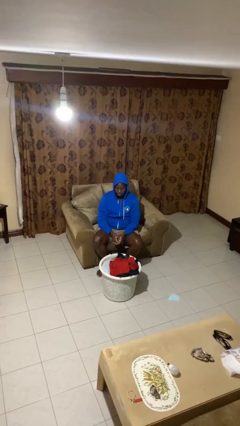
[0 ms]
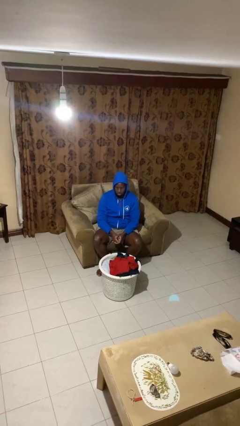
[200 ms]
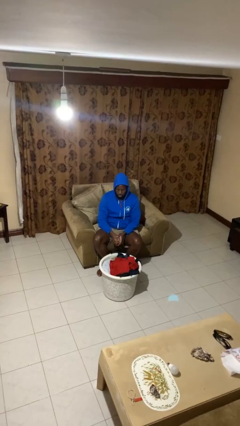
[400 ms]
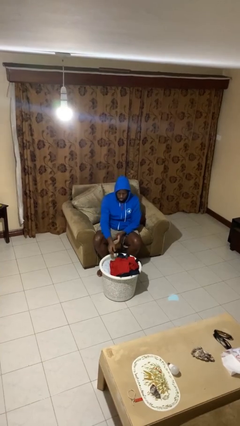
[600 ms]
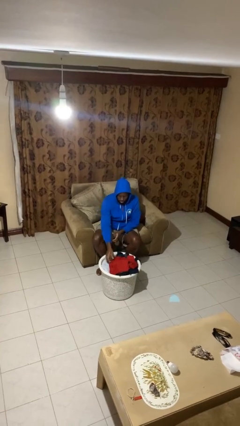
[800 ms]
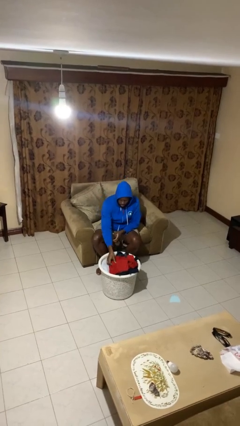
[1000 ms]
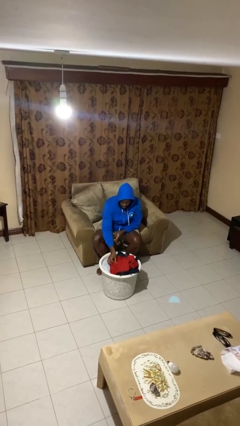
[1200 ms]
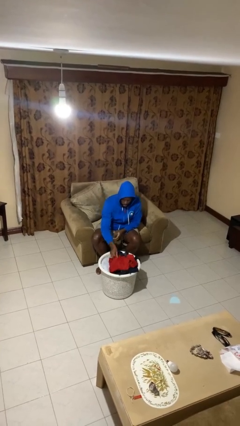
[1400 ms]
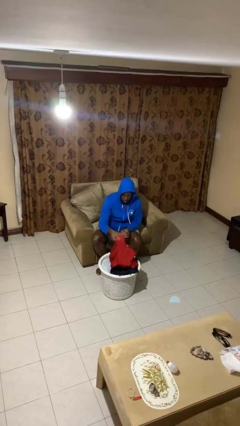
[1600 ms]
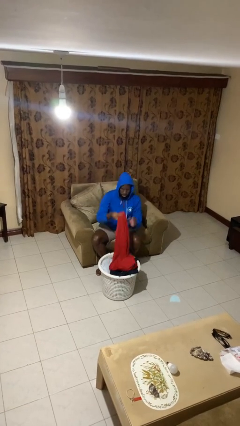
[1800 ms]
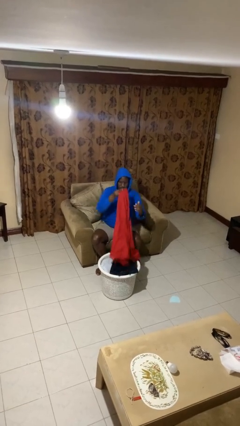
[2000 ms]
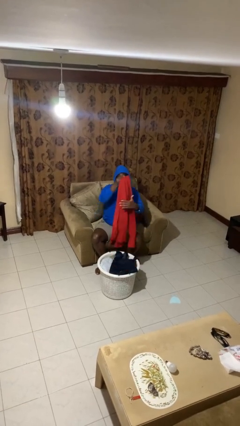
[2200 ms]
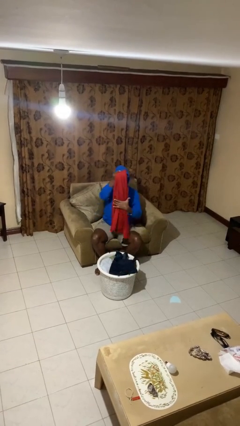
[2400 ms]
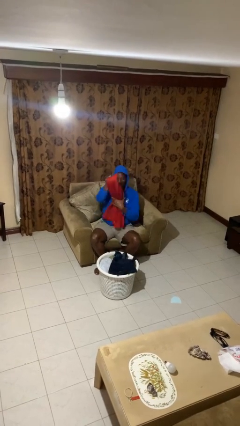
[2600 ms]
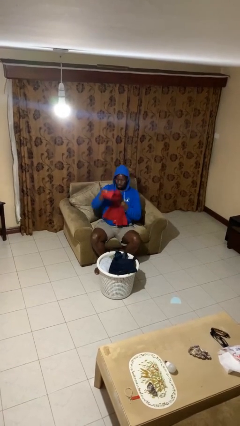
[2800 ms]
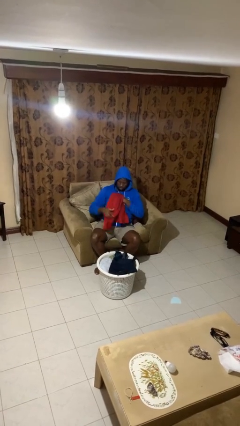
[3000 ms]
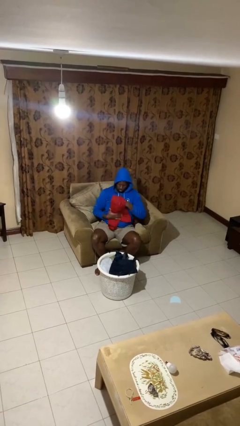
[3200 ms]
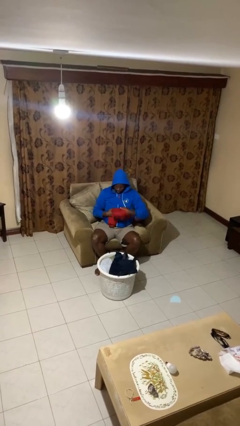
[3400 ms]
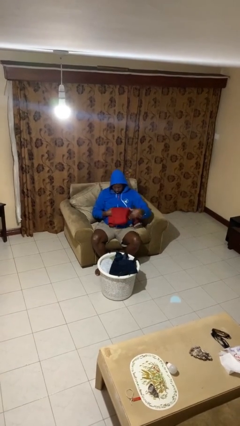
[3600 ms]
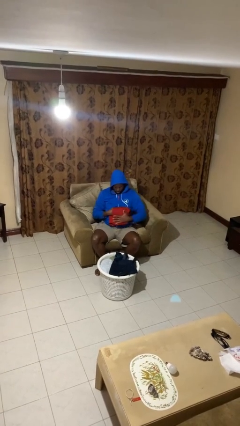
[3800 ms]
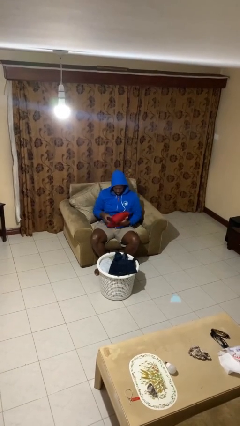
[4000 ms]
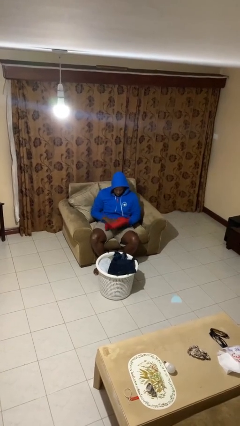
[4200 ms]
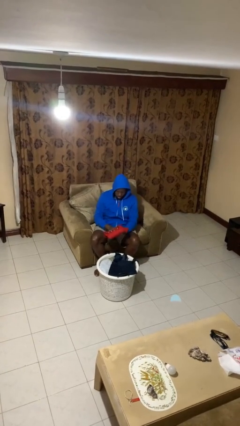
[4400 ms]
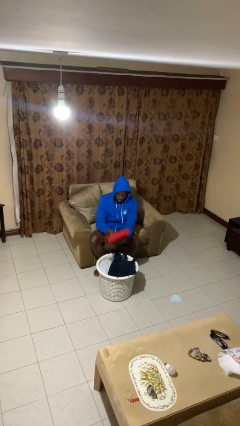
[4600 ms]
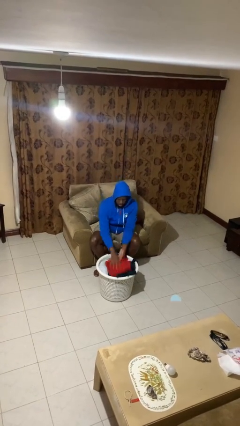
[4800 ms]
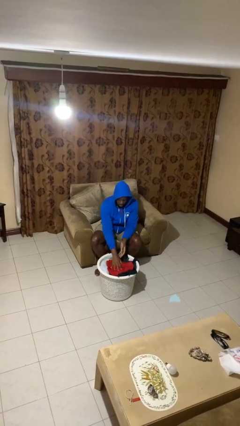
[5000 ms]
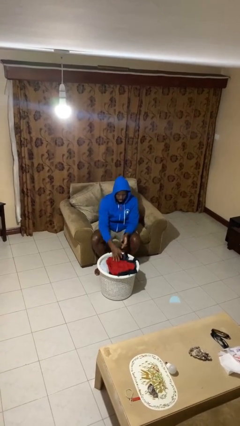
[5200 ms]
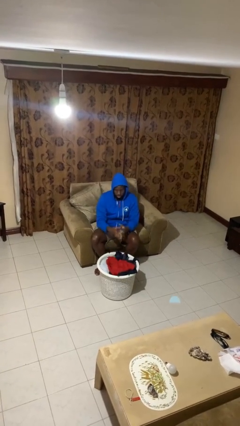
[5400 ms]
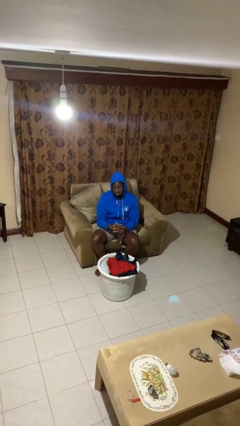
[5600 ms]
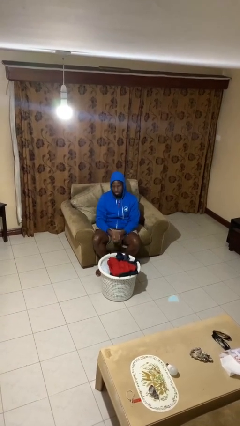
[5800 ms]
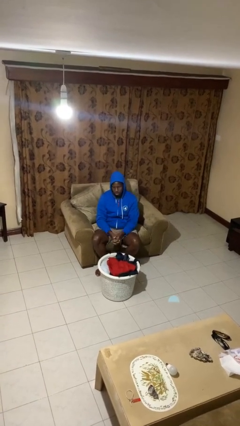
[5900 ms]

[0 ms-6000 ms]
person folds shirt

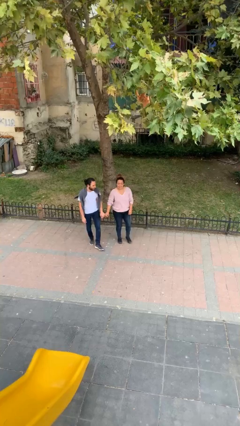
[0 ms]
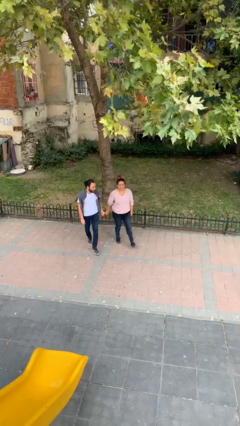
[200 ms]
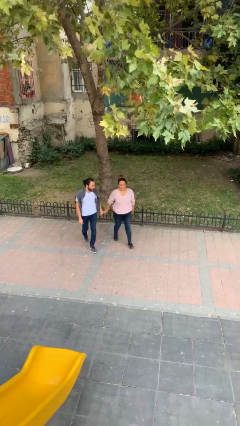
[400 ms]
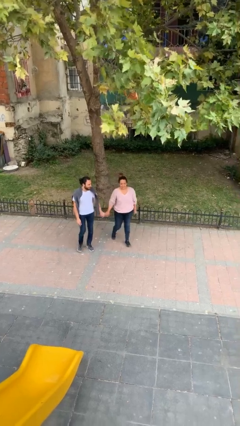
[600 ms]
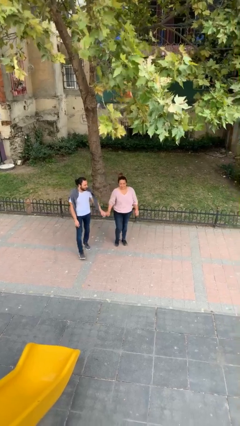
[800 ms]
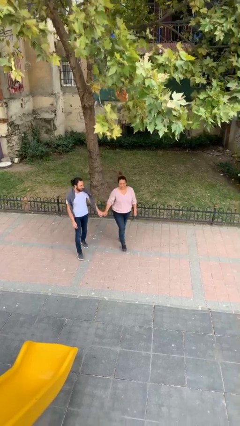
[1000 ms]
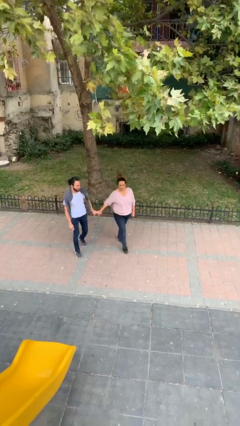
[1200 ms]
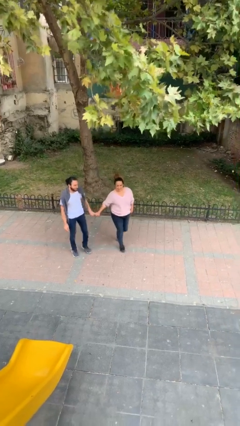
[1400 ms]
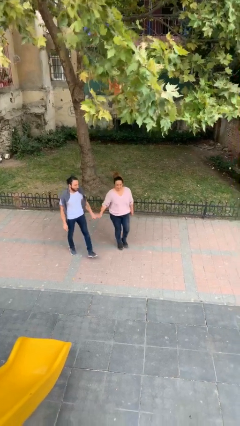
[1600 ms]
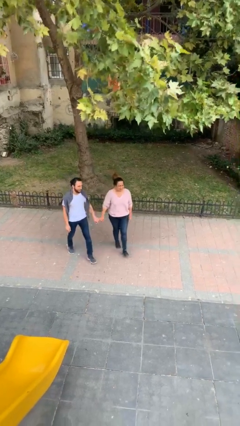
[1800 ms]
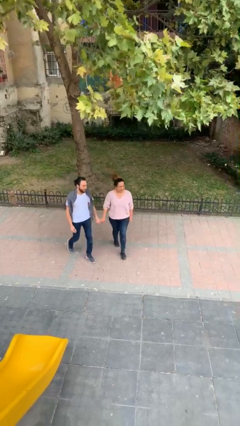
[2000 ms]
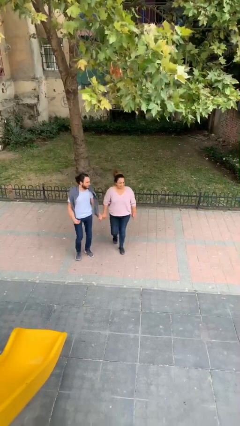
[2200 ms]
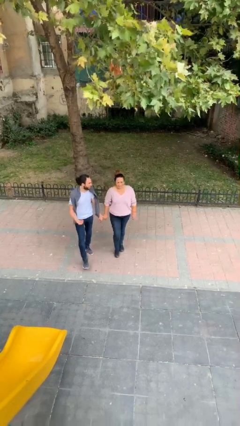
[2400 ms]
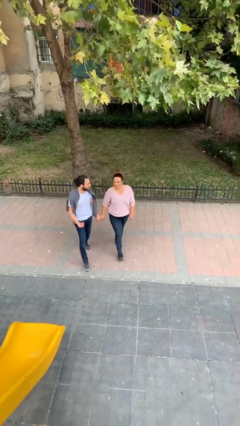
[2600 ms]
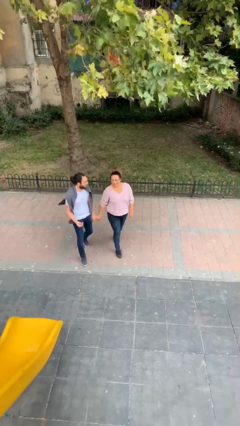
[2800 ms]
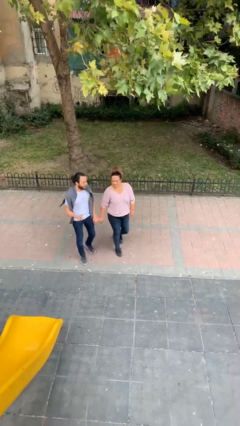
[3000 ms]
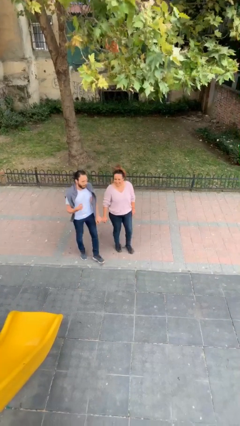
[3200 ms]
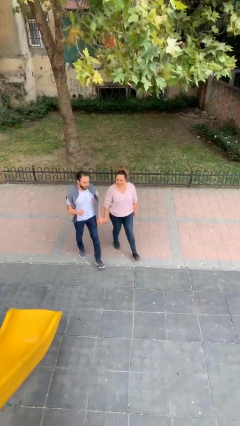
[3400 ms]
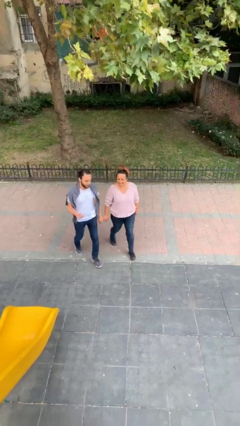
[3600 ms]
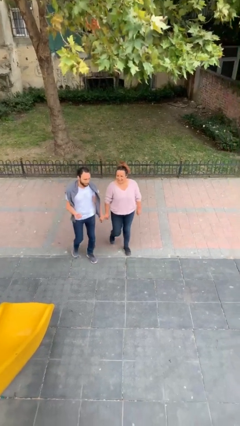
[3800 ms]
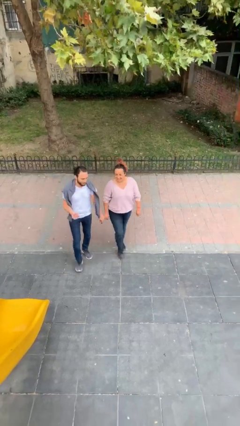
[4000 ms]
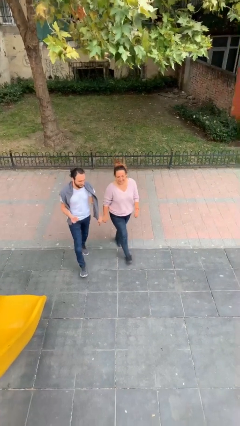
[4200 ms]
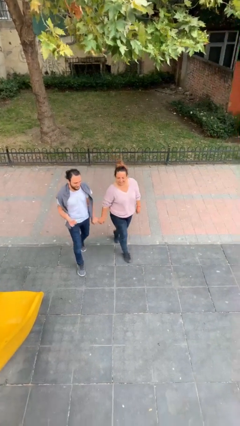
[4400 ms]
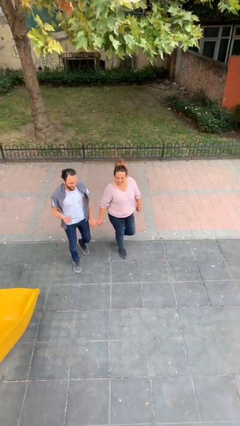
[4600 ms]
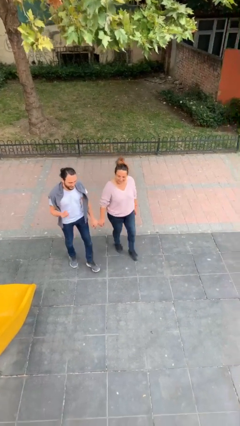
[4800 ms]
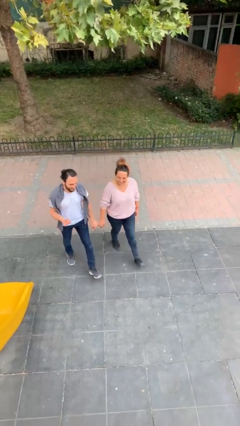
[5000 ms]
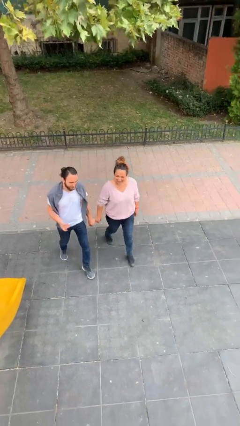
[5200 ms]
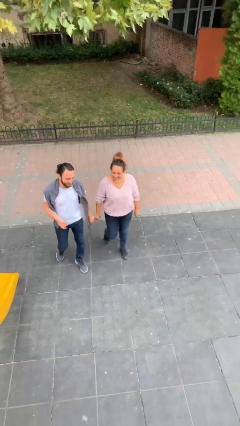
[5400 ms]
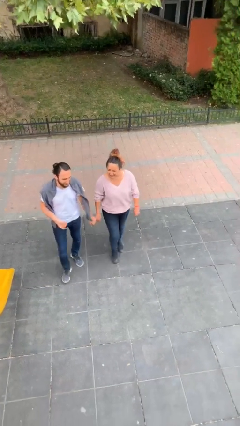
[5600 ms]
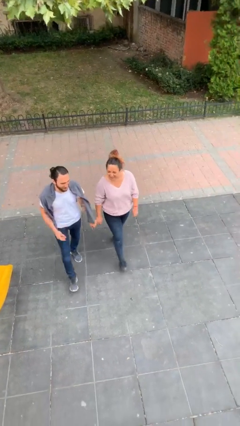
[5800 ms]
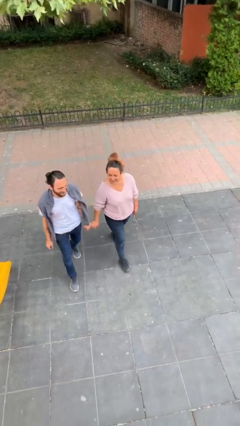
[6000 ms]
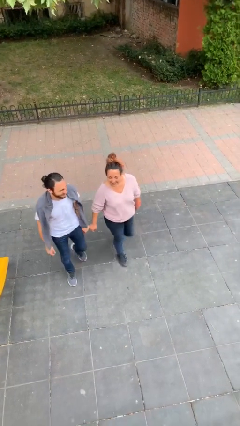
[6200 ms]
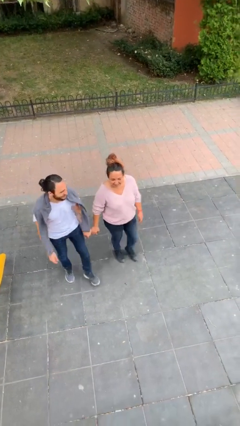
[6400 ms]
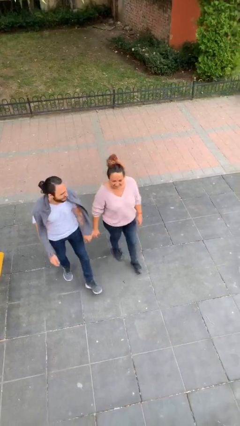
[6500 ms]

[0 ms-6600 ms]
person holds hand

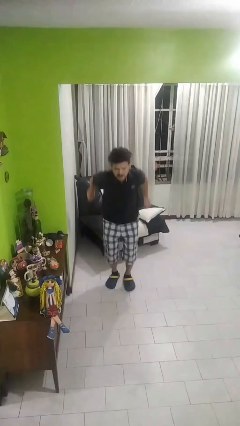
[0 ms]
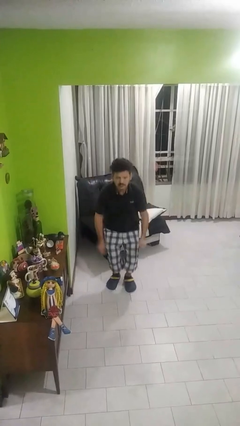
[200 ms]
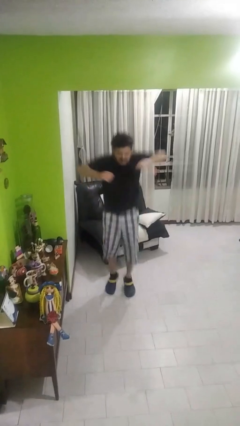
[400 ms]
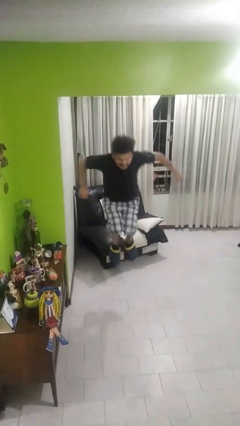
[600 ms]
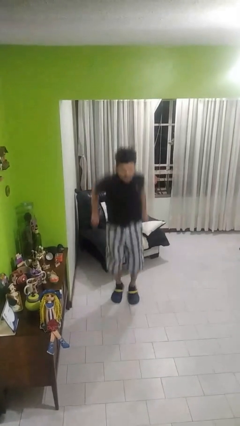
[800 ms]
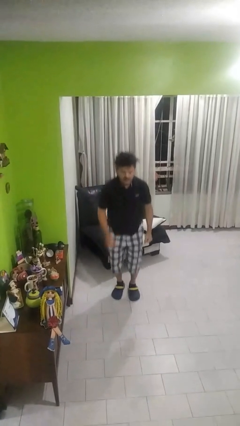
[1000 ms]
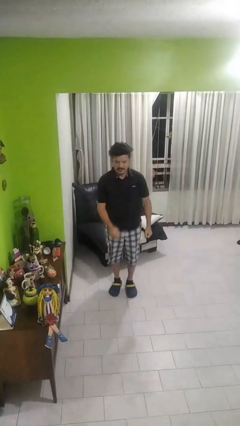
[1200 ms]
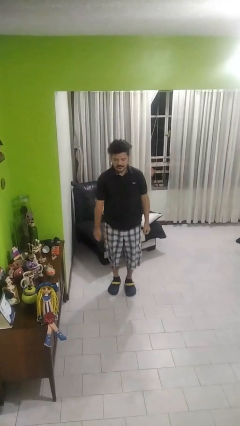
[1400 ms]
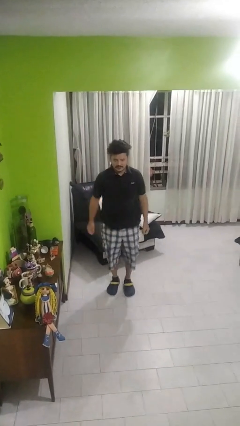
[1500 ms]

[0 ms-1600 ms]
person jumps

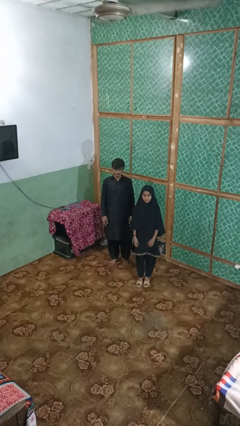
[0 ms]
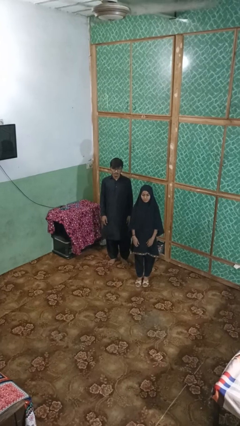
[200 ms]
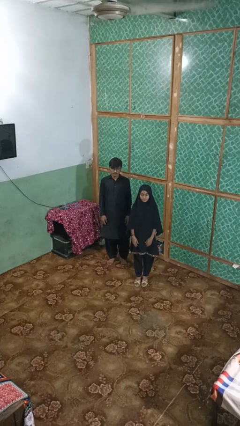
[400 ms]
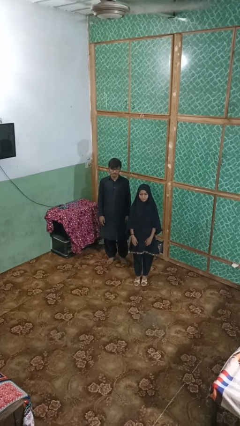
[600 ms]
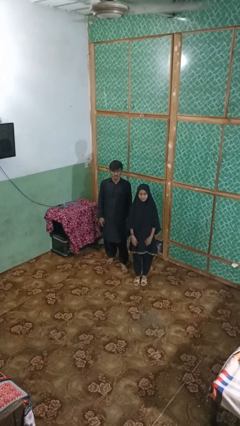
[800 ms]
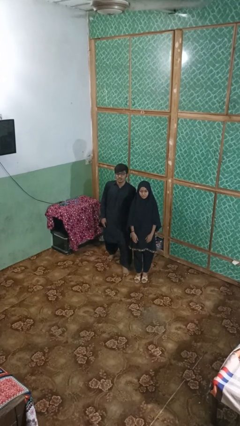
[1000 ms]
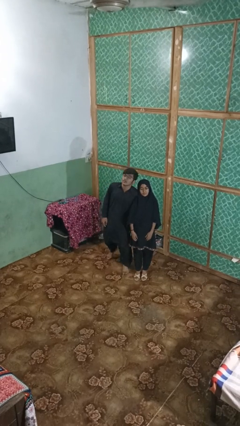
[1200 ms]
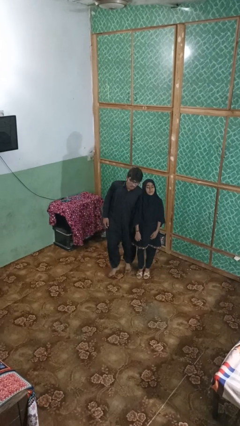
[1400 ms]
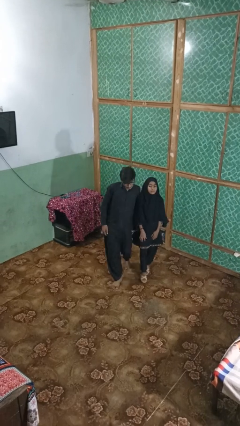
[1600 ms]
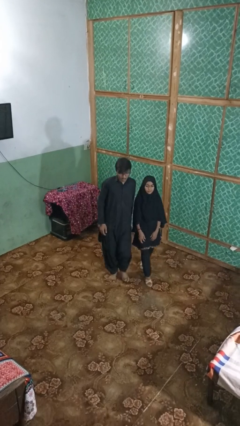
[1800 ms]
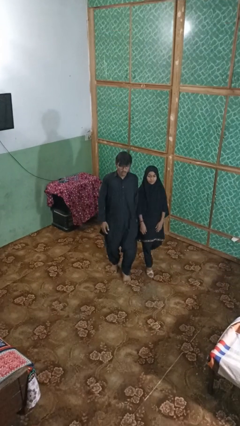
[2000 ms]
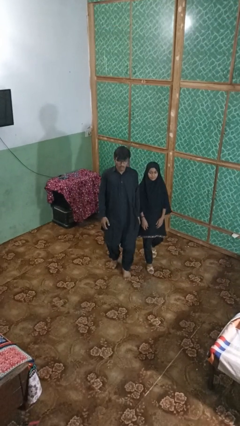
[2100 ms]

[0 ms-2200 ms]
person shoves person

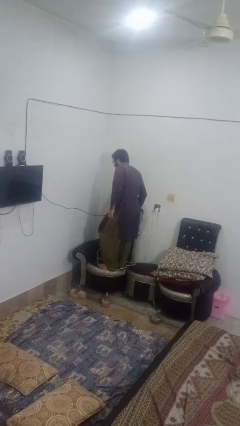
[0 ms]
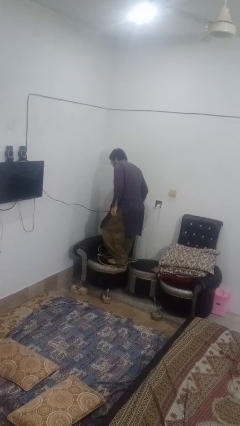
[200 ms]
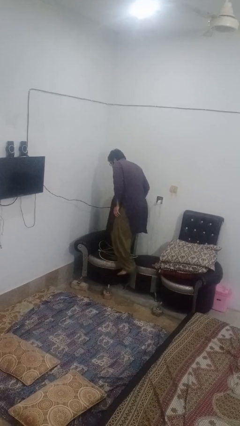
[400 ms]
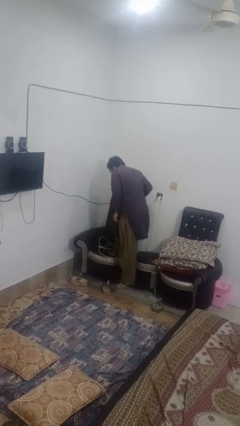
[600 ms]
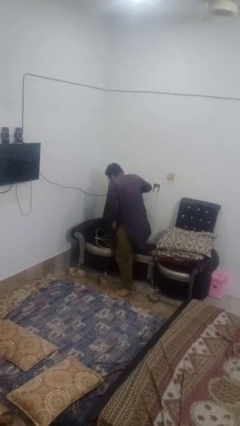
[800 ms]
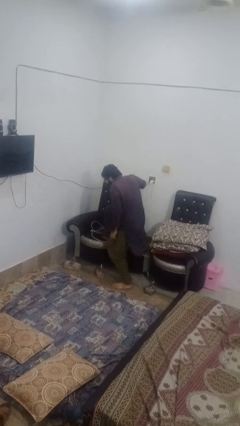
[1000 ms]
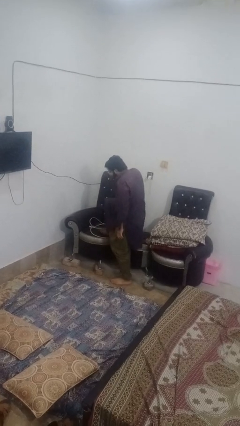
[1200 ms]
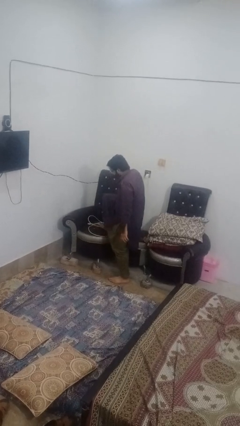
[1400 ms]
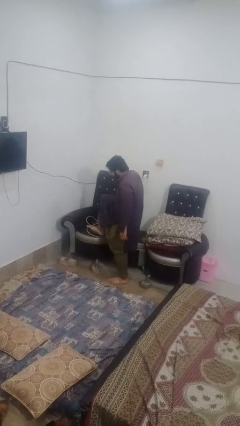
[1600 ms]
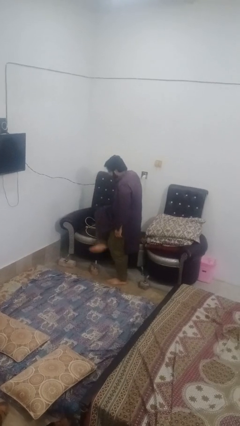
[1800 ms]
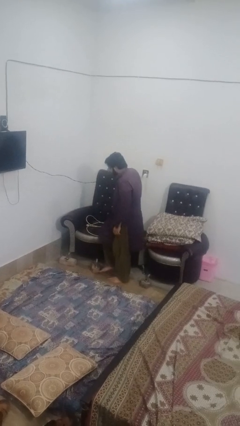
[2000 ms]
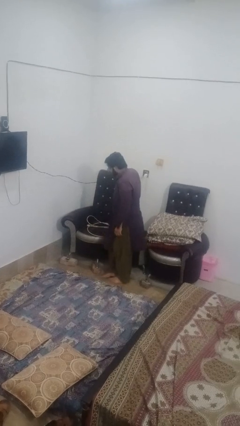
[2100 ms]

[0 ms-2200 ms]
person climbs off couch
